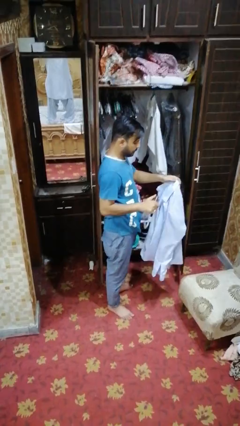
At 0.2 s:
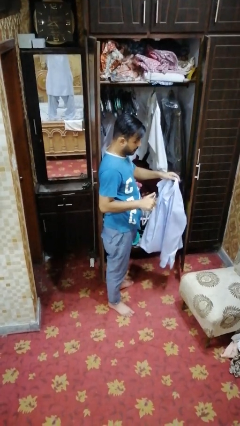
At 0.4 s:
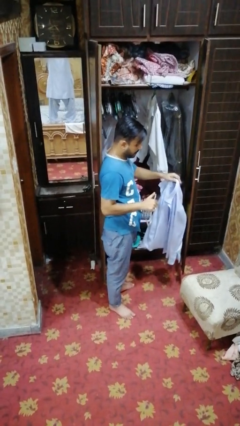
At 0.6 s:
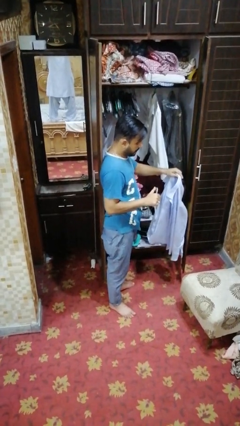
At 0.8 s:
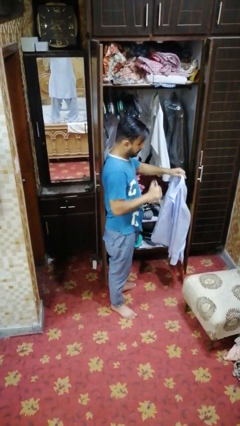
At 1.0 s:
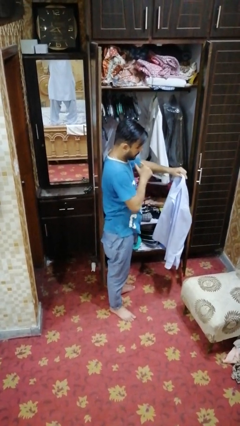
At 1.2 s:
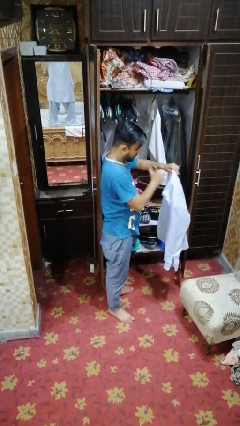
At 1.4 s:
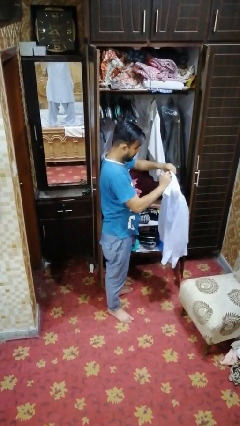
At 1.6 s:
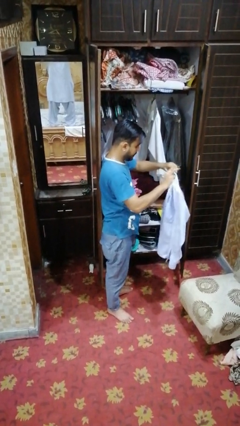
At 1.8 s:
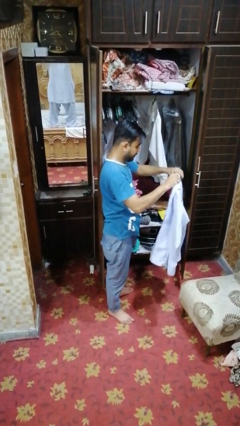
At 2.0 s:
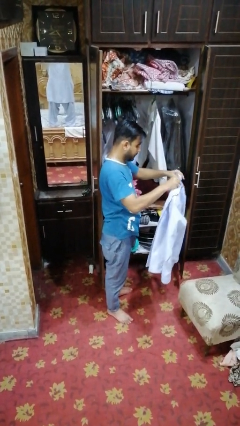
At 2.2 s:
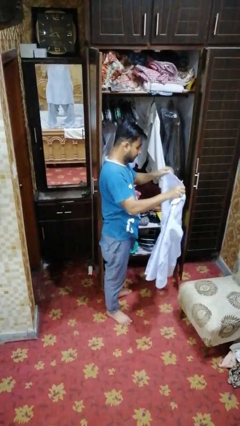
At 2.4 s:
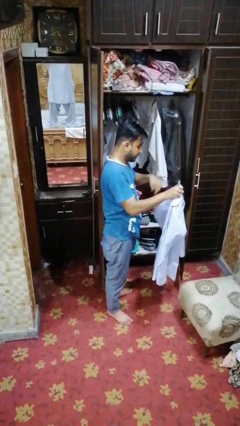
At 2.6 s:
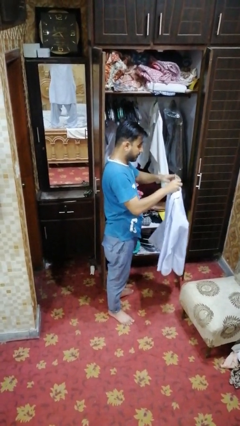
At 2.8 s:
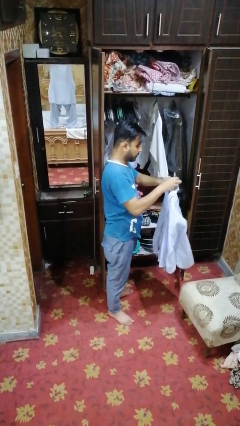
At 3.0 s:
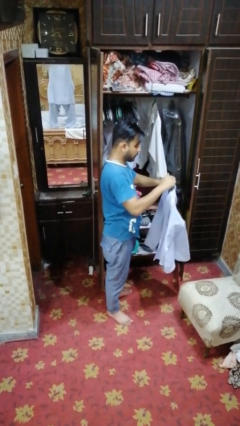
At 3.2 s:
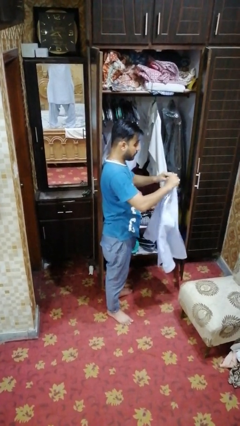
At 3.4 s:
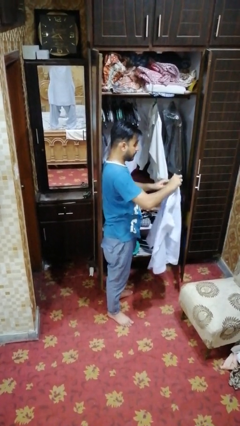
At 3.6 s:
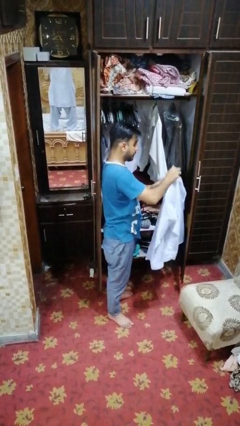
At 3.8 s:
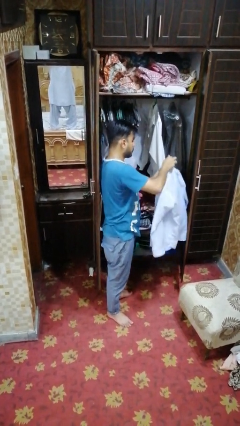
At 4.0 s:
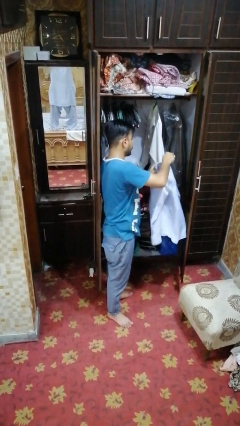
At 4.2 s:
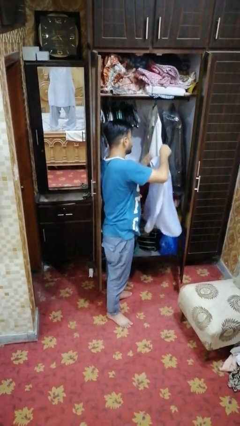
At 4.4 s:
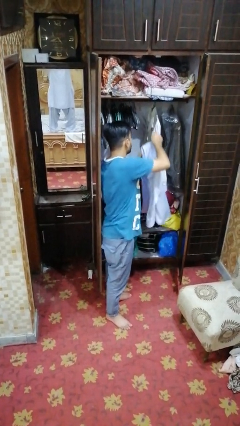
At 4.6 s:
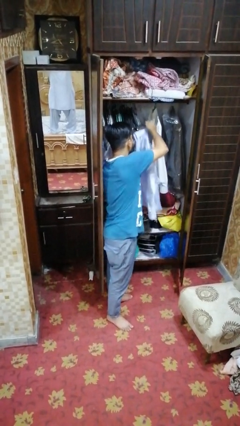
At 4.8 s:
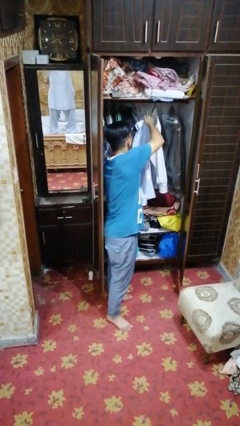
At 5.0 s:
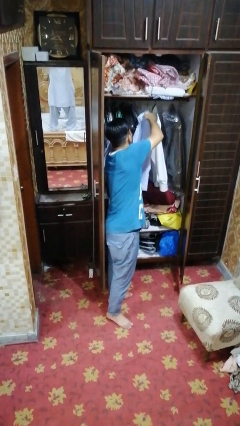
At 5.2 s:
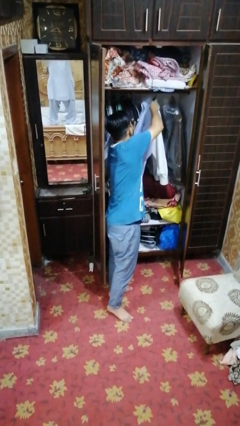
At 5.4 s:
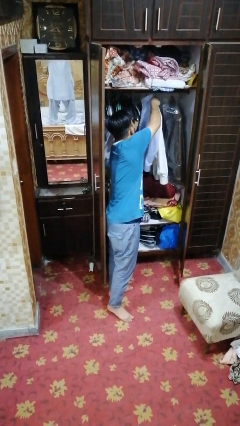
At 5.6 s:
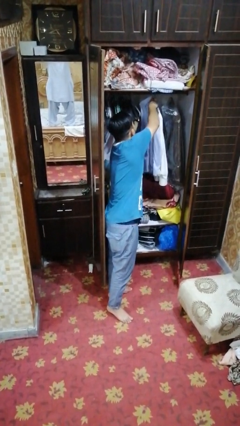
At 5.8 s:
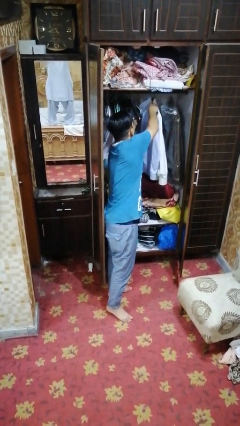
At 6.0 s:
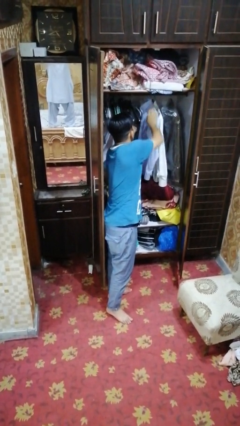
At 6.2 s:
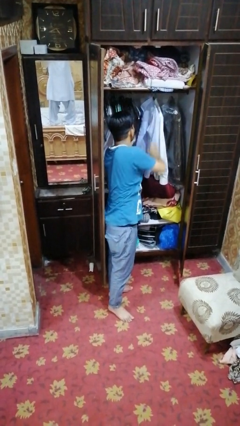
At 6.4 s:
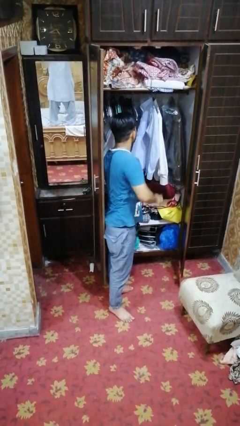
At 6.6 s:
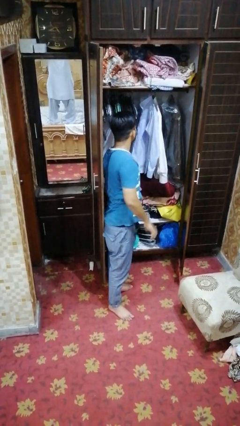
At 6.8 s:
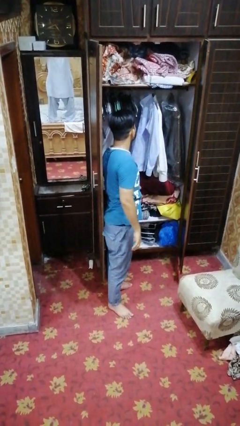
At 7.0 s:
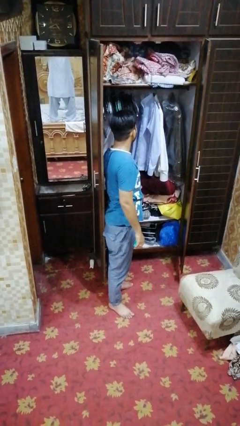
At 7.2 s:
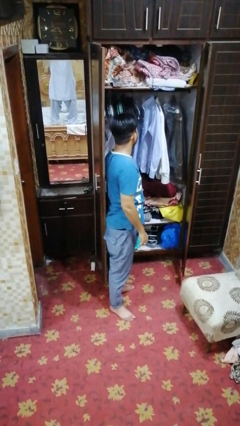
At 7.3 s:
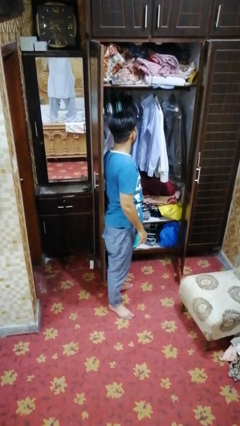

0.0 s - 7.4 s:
person puts clothes into closet

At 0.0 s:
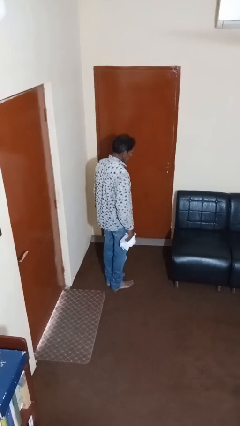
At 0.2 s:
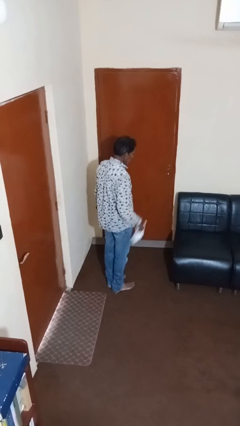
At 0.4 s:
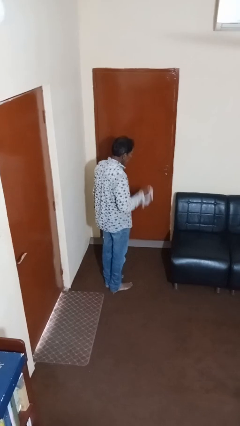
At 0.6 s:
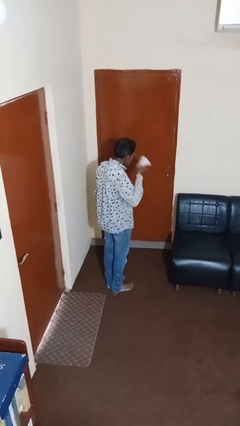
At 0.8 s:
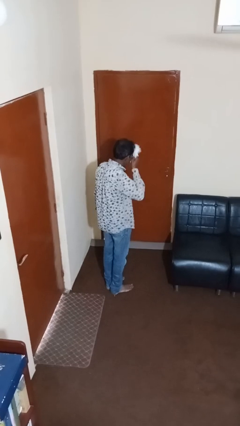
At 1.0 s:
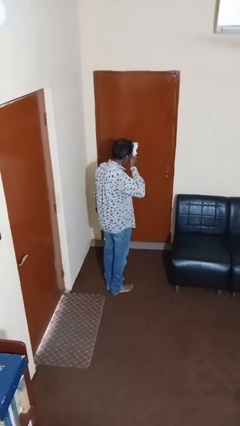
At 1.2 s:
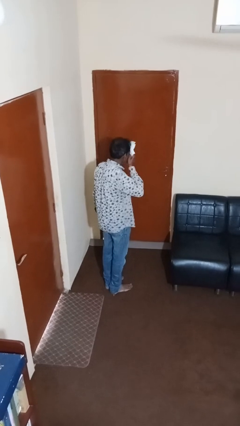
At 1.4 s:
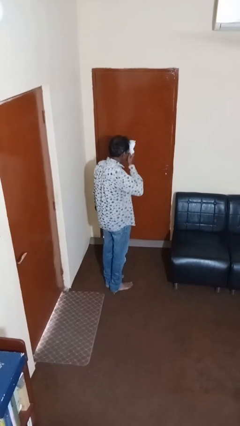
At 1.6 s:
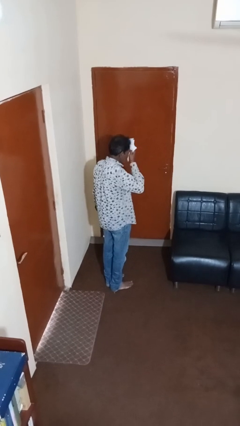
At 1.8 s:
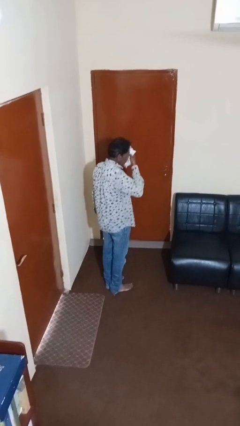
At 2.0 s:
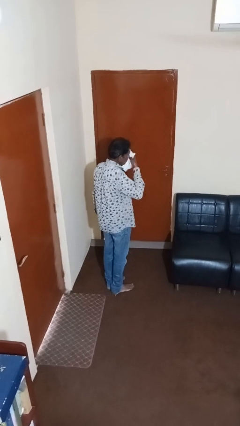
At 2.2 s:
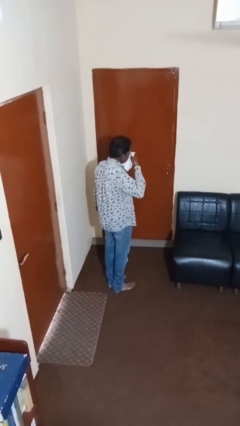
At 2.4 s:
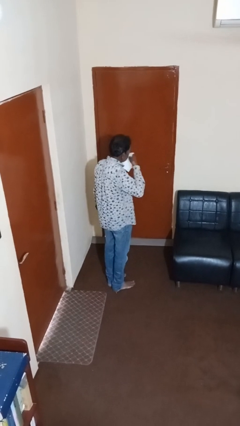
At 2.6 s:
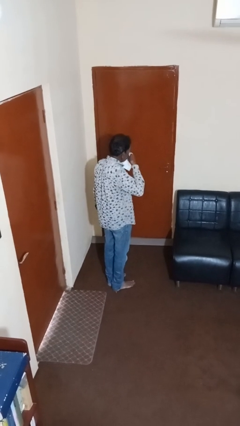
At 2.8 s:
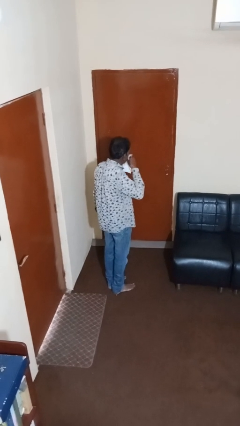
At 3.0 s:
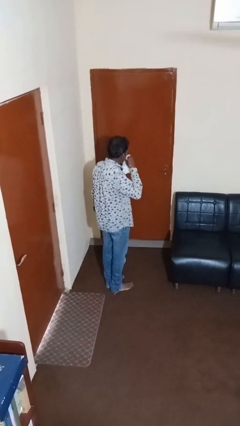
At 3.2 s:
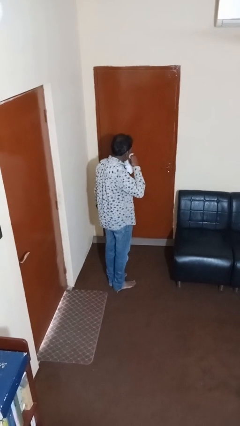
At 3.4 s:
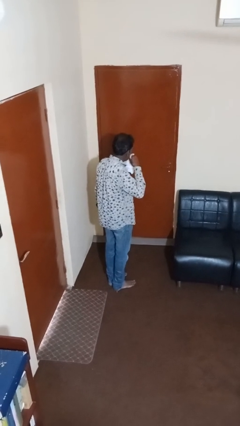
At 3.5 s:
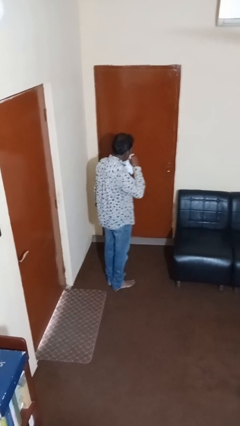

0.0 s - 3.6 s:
person wipes mouth with napkin

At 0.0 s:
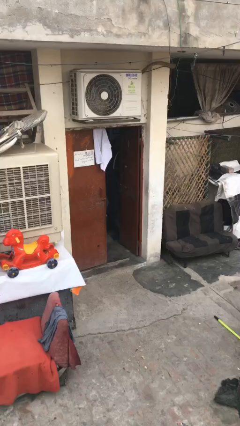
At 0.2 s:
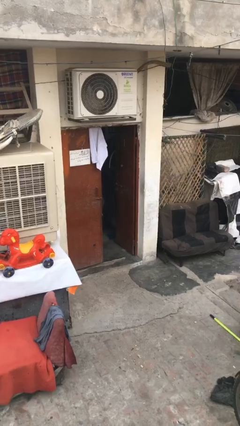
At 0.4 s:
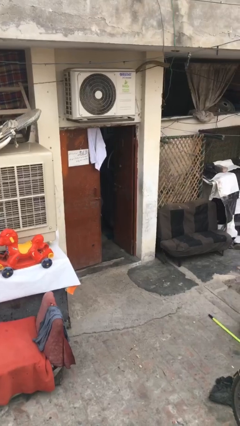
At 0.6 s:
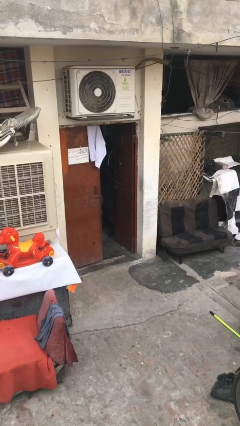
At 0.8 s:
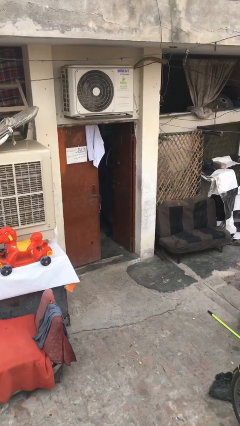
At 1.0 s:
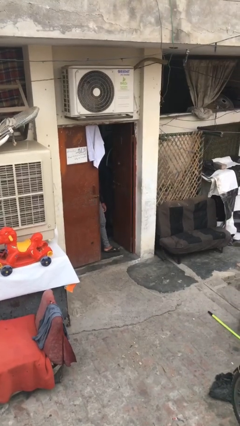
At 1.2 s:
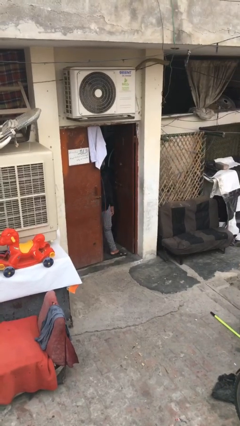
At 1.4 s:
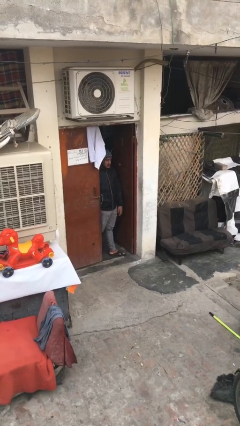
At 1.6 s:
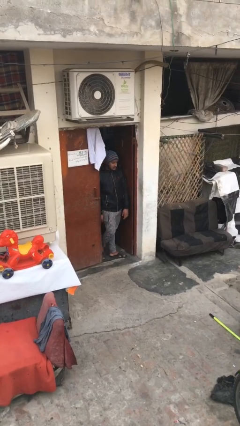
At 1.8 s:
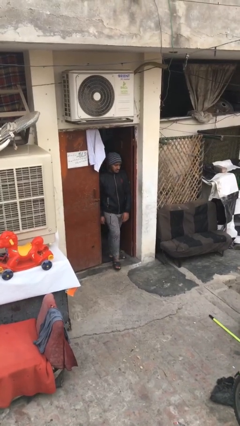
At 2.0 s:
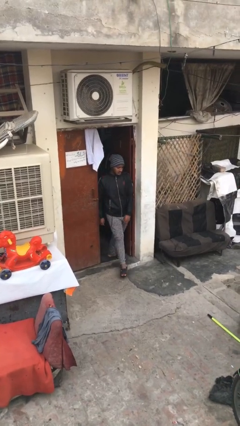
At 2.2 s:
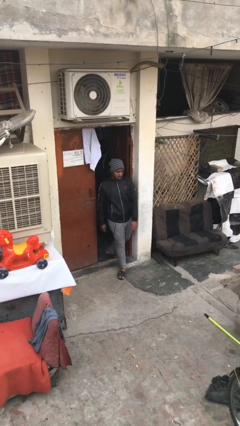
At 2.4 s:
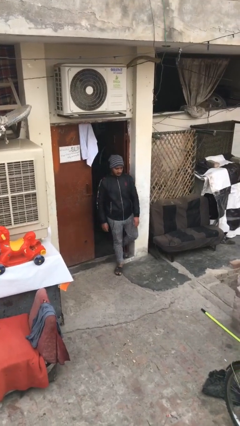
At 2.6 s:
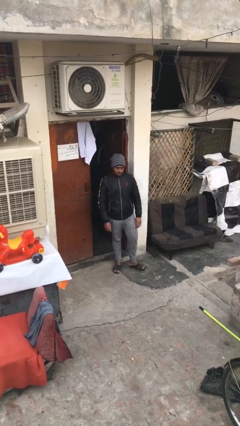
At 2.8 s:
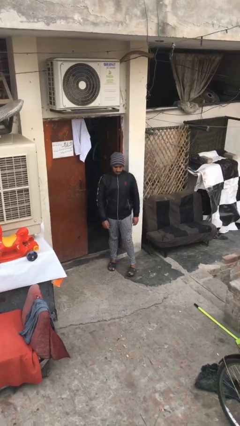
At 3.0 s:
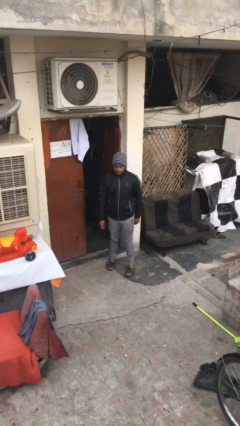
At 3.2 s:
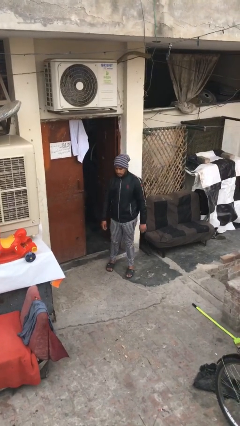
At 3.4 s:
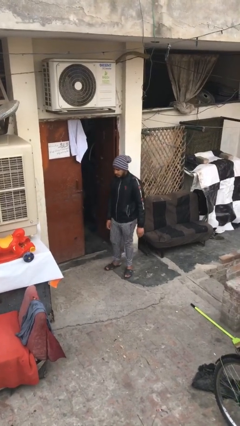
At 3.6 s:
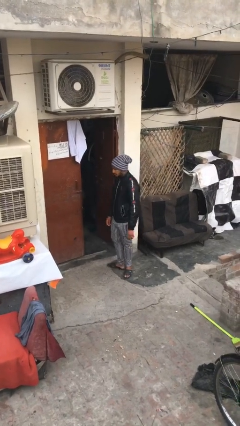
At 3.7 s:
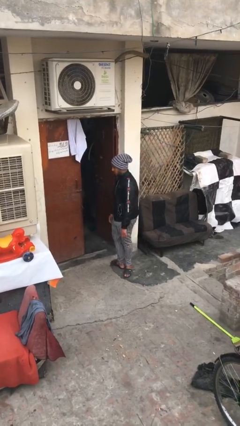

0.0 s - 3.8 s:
person enters scene through structure

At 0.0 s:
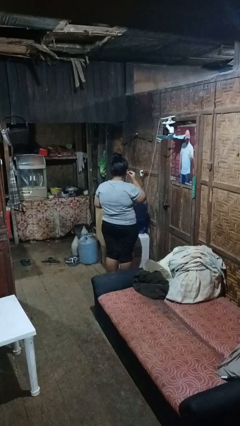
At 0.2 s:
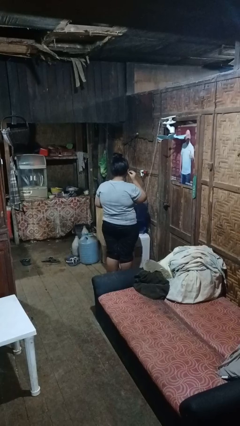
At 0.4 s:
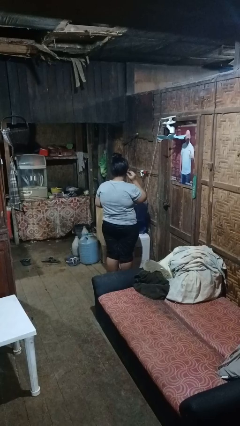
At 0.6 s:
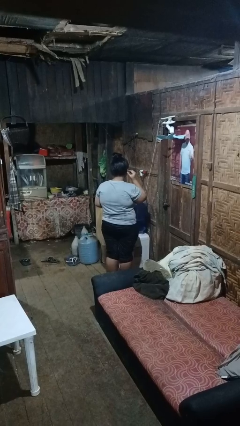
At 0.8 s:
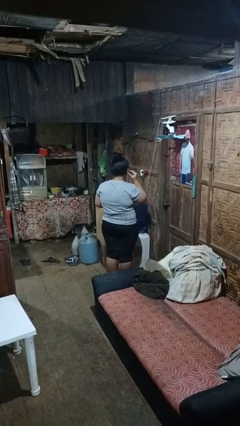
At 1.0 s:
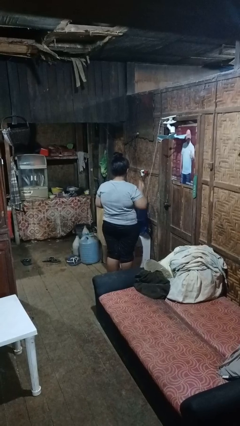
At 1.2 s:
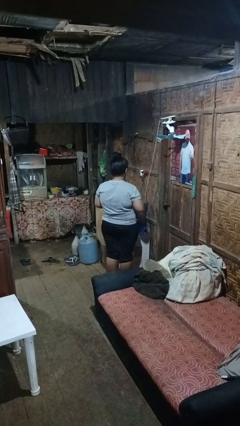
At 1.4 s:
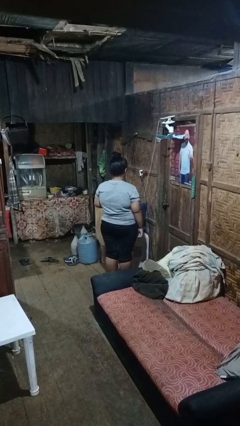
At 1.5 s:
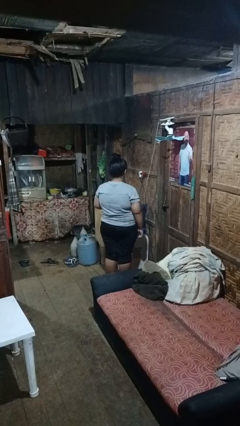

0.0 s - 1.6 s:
person puts on headphones

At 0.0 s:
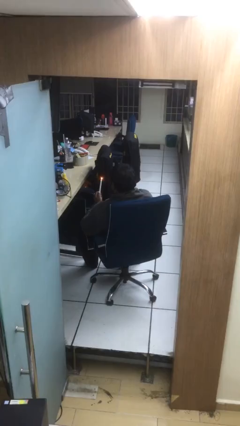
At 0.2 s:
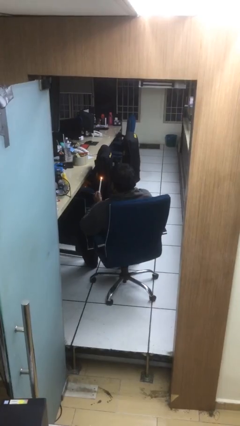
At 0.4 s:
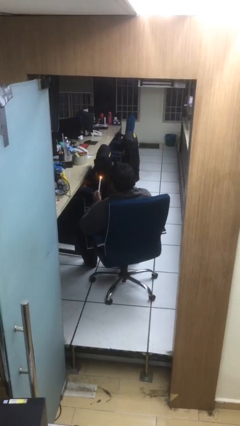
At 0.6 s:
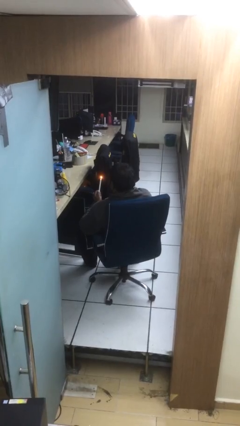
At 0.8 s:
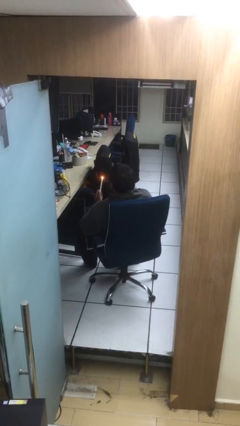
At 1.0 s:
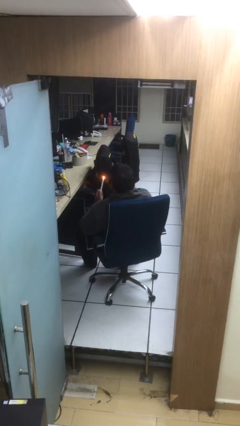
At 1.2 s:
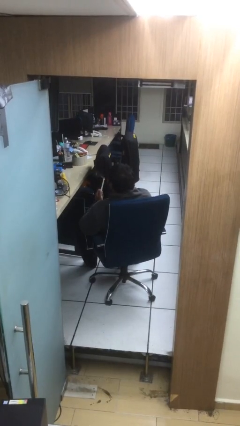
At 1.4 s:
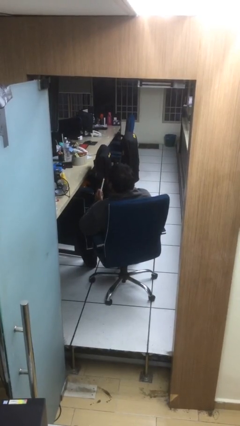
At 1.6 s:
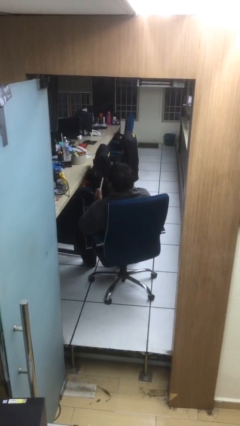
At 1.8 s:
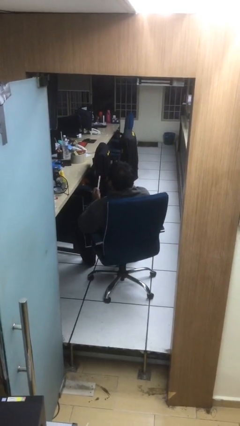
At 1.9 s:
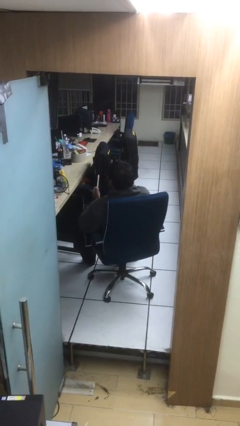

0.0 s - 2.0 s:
person extinguishes candle
